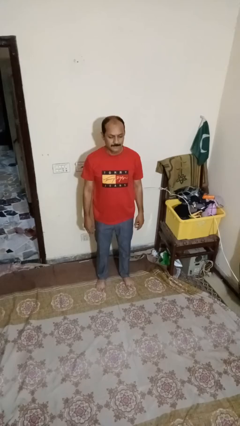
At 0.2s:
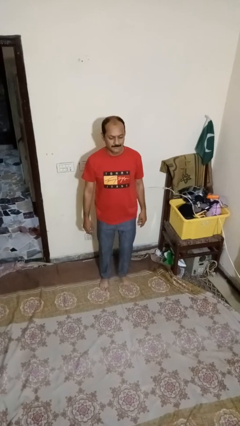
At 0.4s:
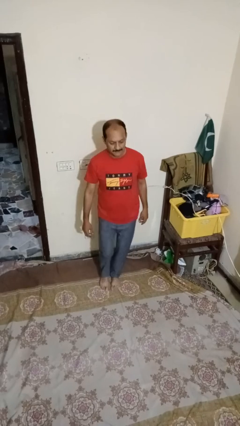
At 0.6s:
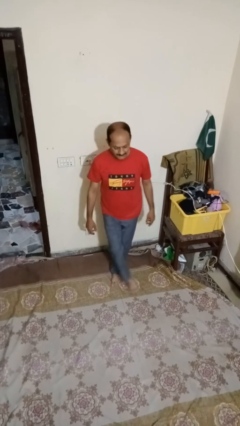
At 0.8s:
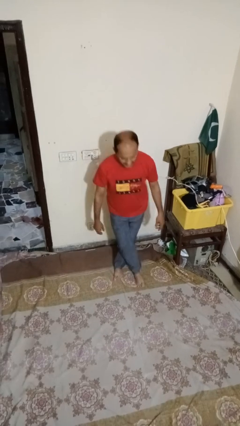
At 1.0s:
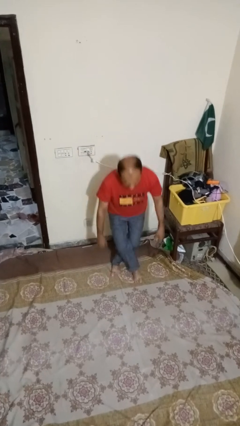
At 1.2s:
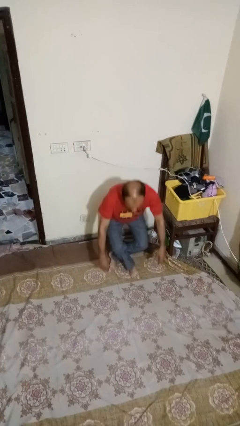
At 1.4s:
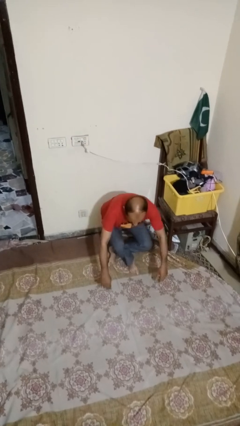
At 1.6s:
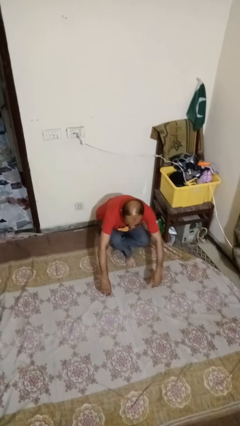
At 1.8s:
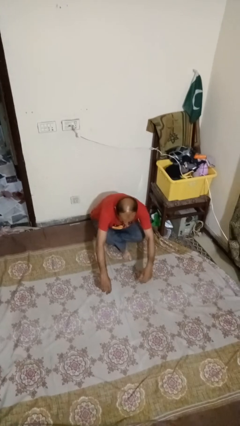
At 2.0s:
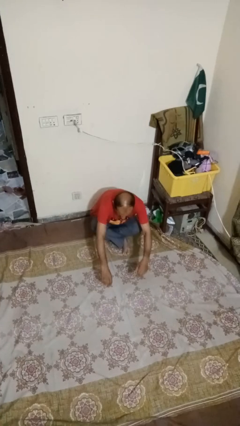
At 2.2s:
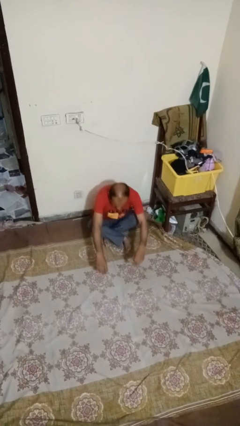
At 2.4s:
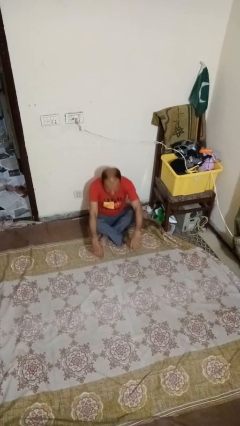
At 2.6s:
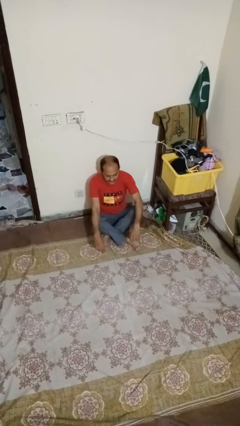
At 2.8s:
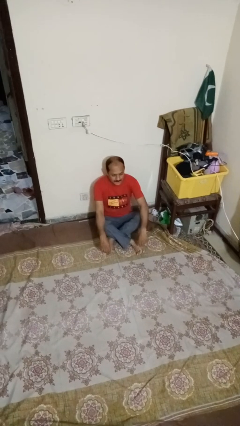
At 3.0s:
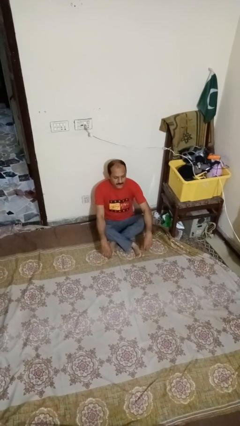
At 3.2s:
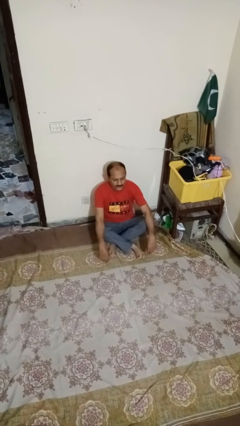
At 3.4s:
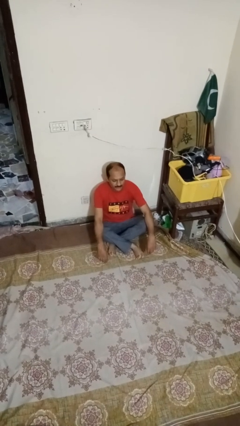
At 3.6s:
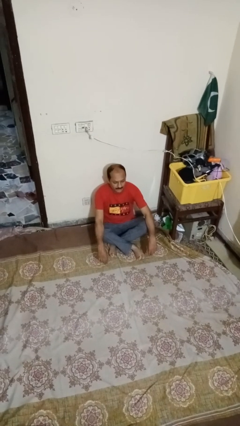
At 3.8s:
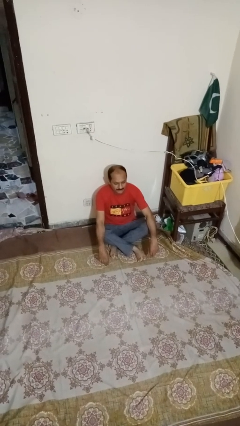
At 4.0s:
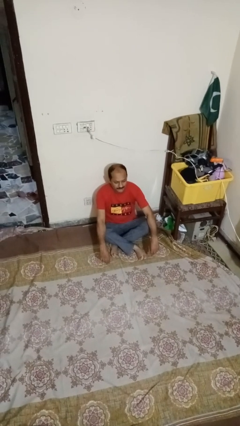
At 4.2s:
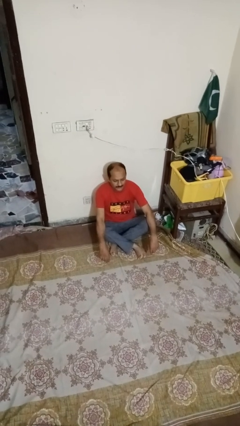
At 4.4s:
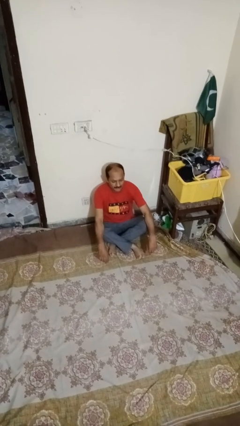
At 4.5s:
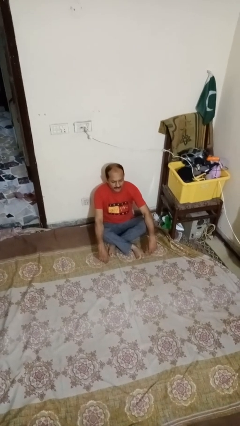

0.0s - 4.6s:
person sits crisscross

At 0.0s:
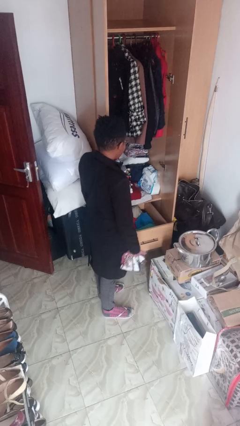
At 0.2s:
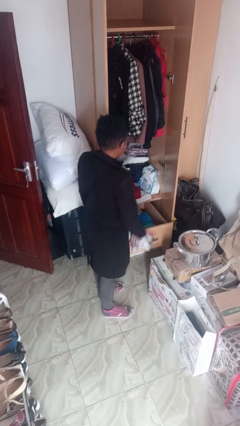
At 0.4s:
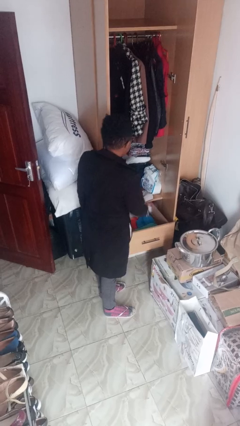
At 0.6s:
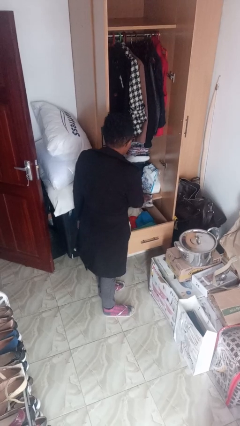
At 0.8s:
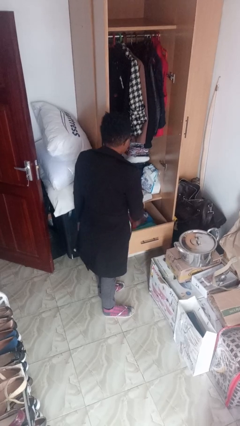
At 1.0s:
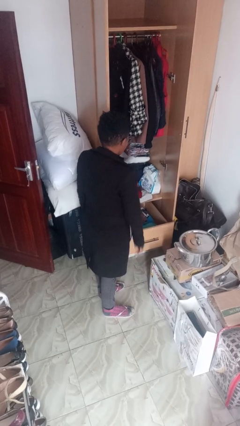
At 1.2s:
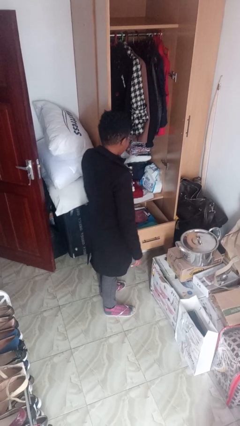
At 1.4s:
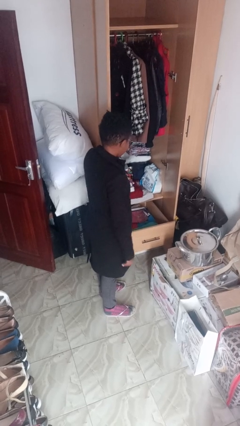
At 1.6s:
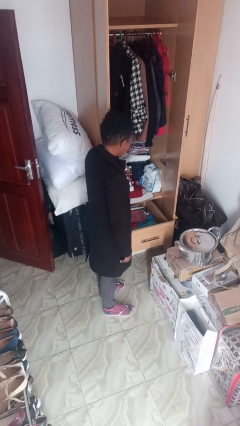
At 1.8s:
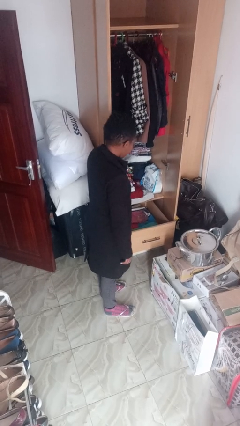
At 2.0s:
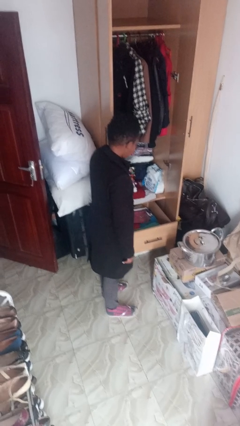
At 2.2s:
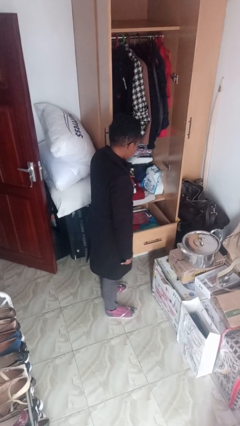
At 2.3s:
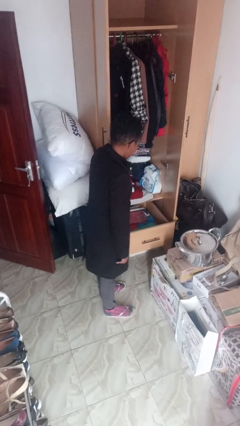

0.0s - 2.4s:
person puts clothes into dresser

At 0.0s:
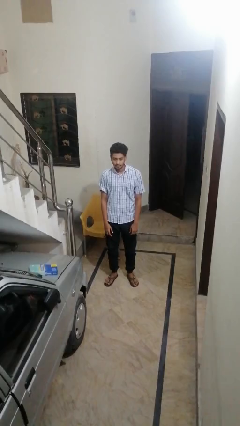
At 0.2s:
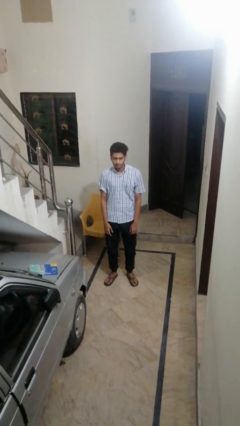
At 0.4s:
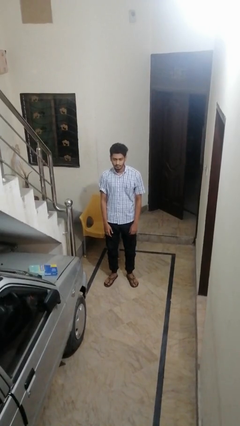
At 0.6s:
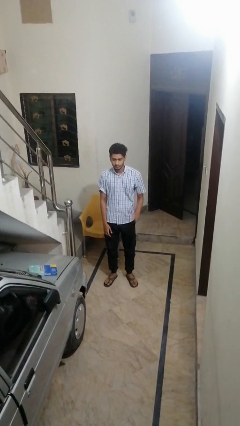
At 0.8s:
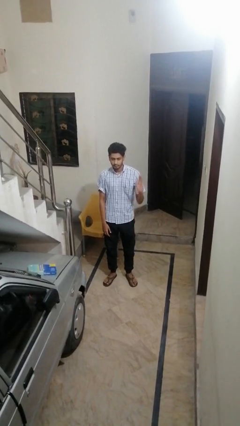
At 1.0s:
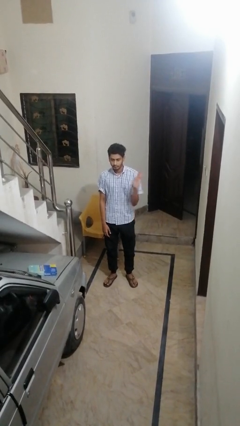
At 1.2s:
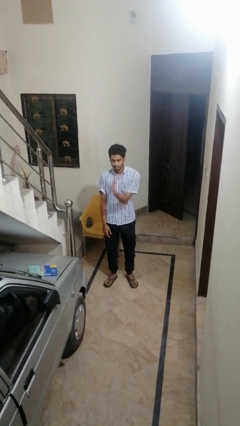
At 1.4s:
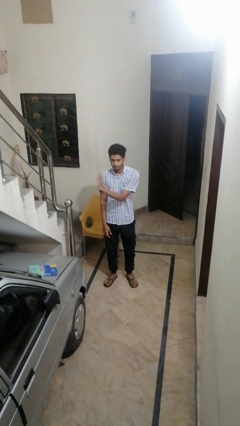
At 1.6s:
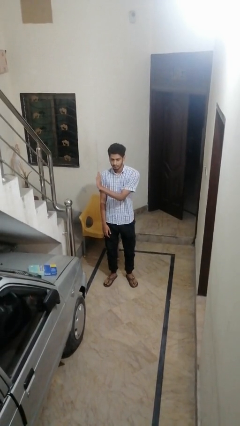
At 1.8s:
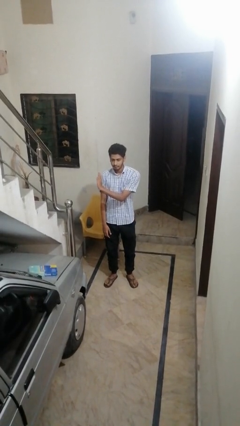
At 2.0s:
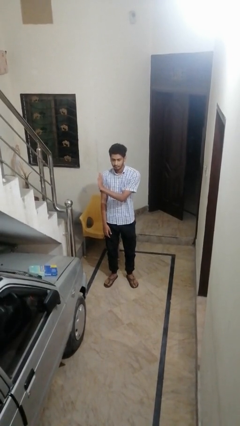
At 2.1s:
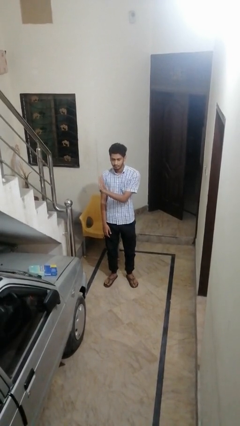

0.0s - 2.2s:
person gestures swipe right

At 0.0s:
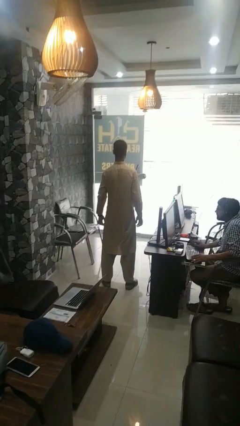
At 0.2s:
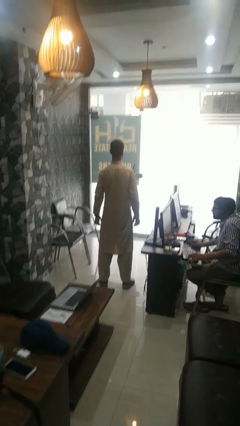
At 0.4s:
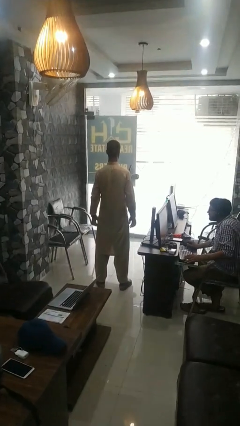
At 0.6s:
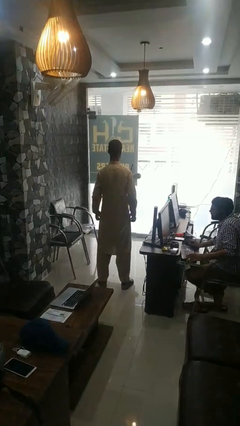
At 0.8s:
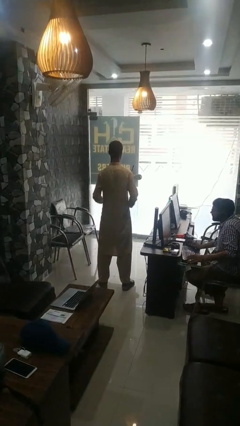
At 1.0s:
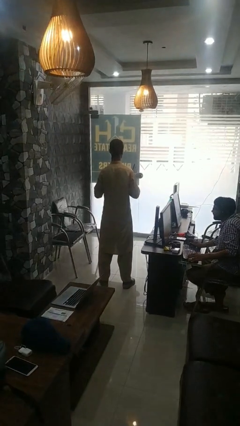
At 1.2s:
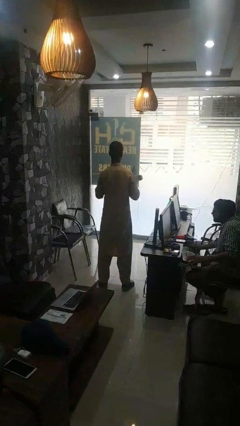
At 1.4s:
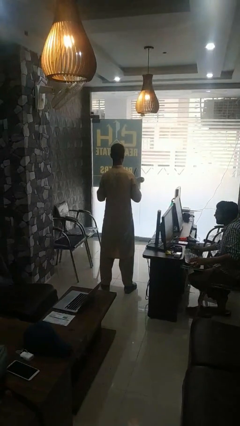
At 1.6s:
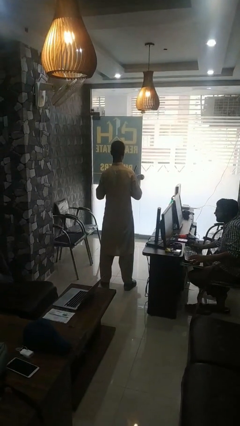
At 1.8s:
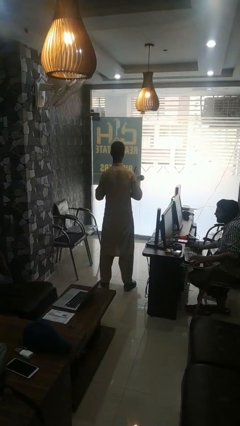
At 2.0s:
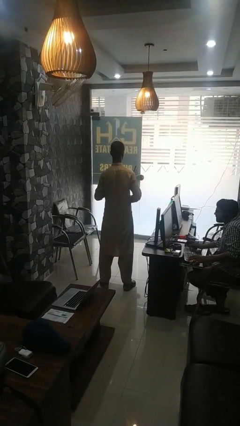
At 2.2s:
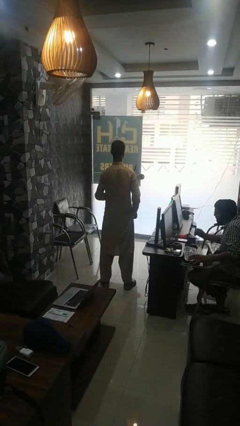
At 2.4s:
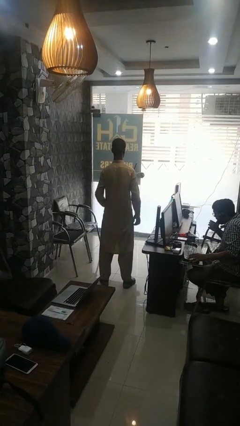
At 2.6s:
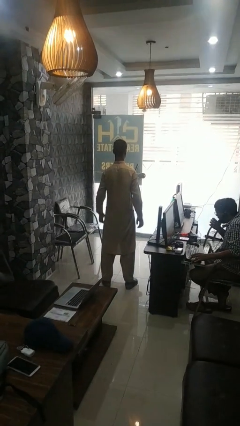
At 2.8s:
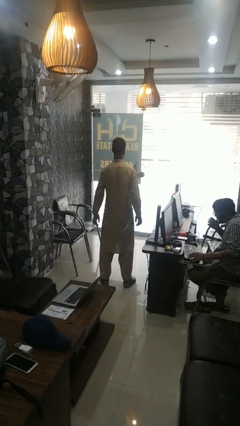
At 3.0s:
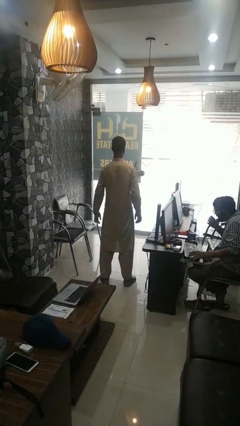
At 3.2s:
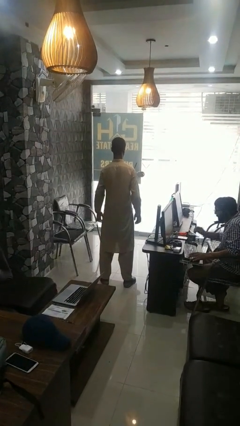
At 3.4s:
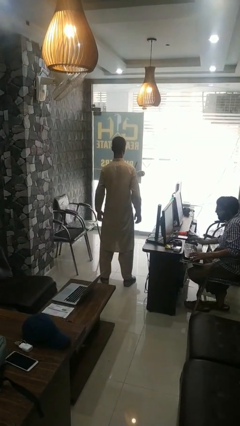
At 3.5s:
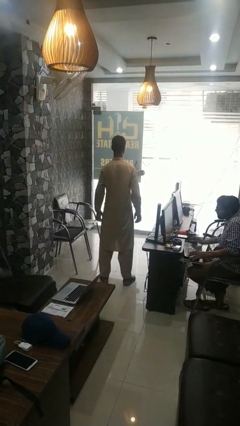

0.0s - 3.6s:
person unbuttons shirt

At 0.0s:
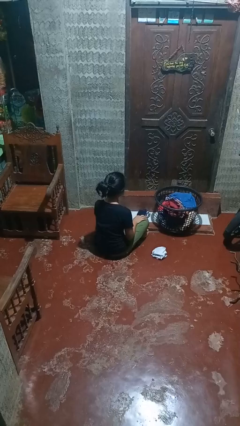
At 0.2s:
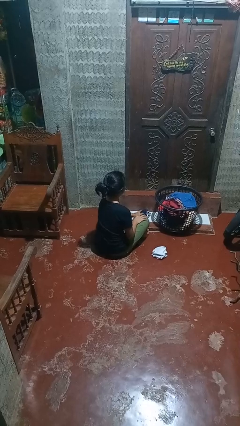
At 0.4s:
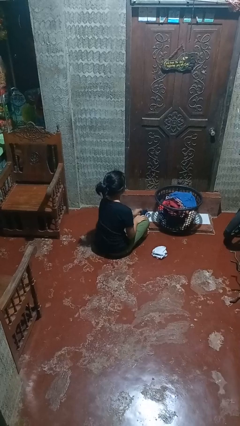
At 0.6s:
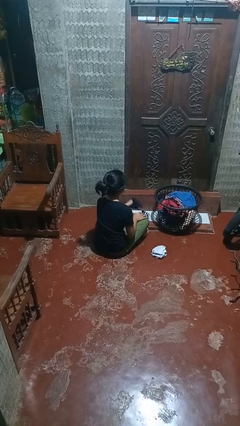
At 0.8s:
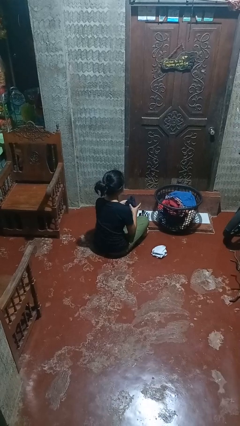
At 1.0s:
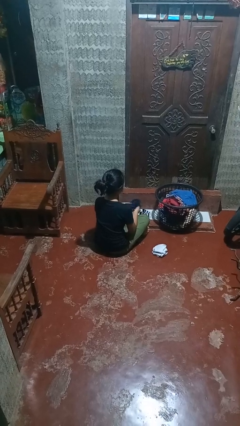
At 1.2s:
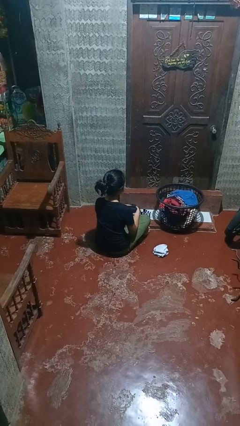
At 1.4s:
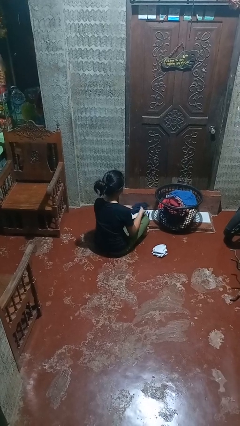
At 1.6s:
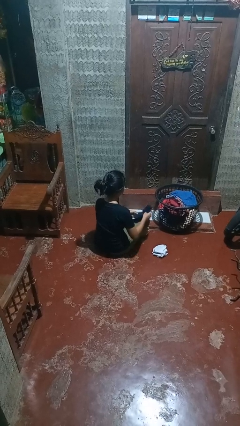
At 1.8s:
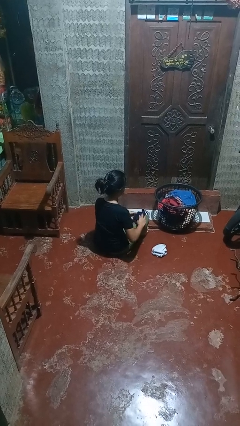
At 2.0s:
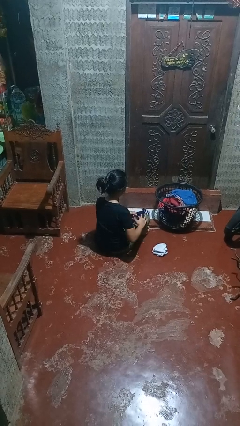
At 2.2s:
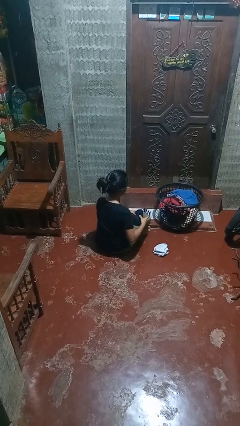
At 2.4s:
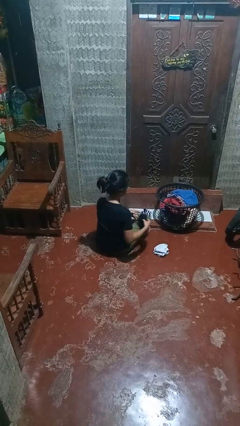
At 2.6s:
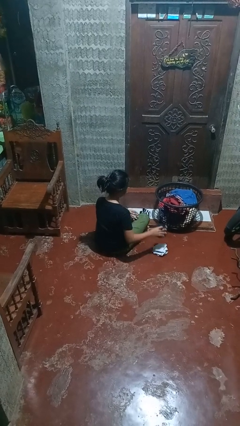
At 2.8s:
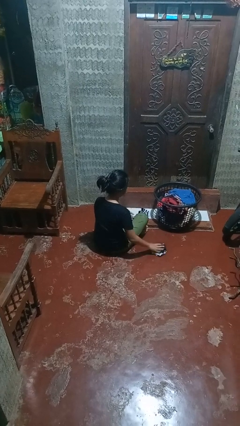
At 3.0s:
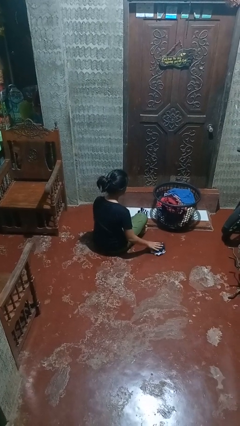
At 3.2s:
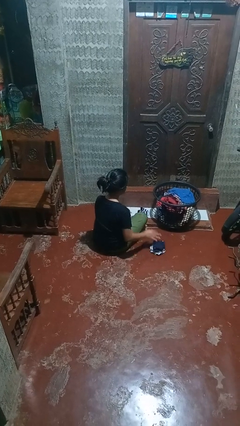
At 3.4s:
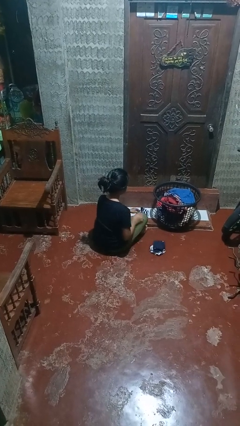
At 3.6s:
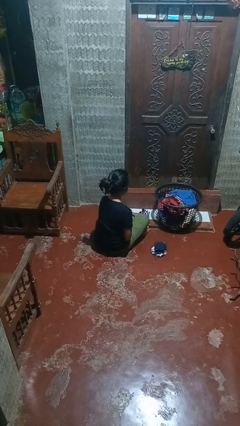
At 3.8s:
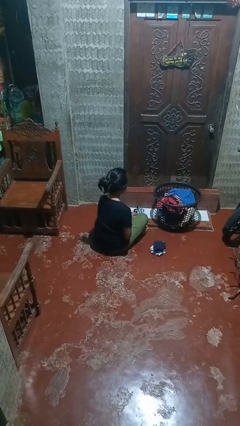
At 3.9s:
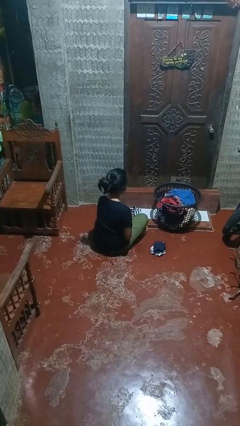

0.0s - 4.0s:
person folds socks

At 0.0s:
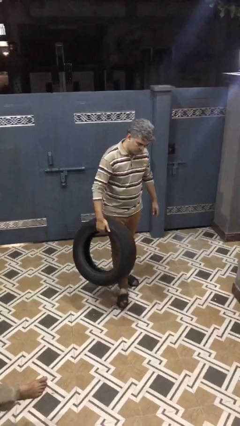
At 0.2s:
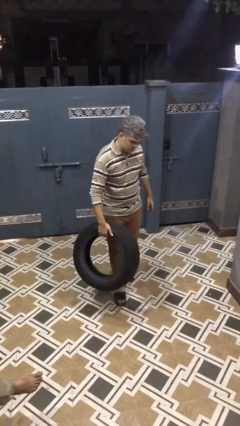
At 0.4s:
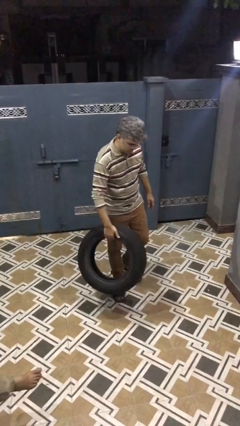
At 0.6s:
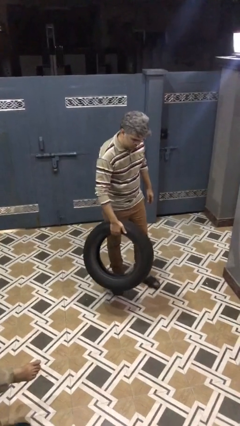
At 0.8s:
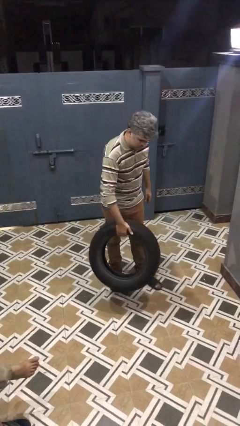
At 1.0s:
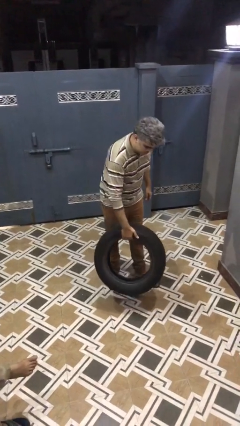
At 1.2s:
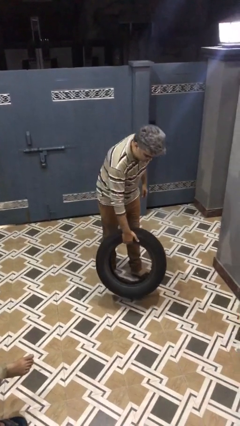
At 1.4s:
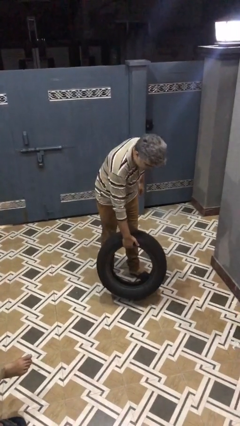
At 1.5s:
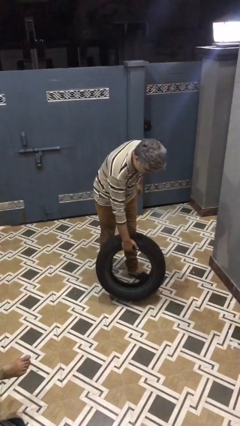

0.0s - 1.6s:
person puts down object on floor
